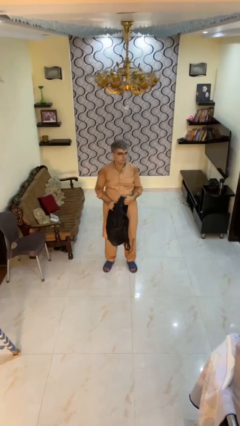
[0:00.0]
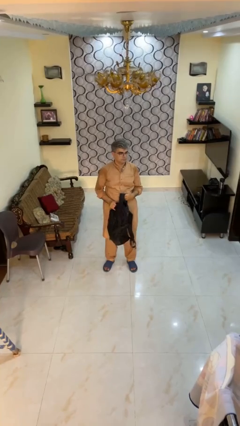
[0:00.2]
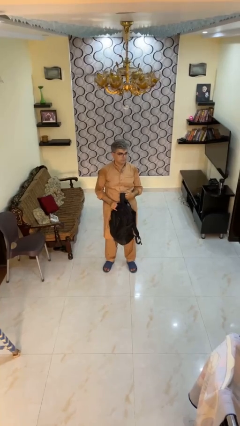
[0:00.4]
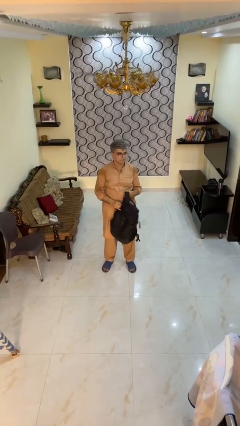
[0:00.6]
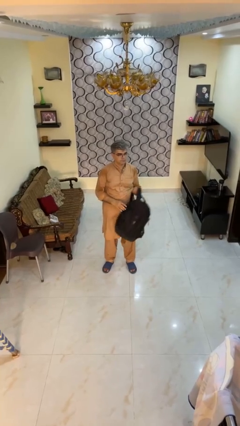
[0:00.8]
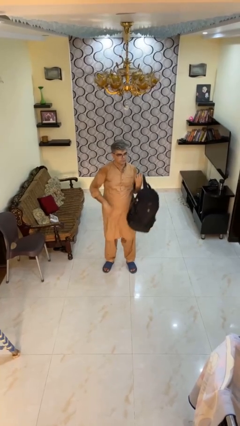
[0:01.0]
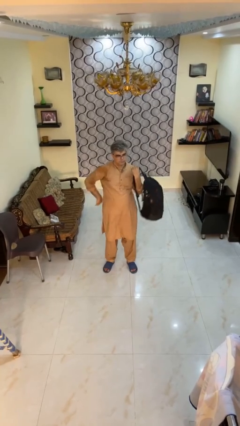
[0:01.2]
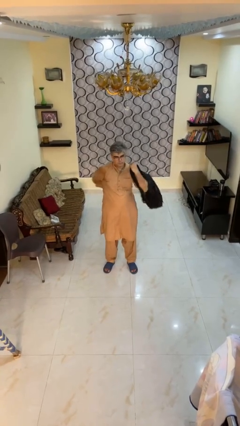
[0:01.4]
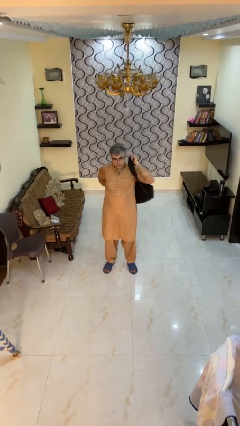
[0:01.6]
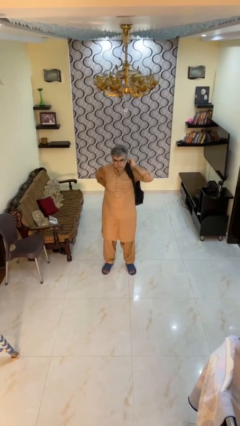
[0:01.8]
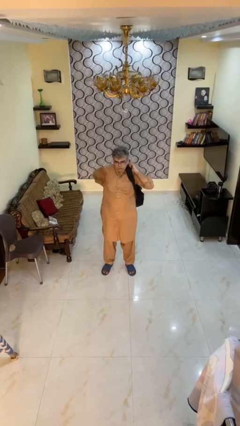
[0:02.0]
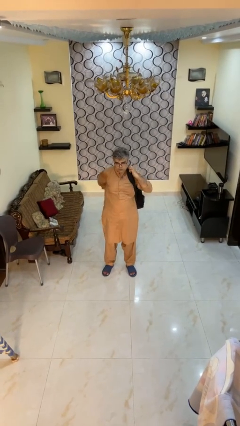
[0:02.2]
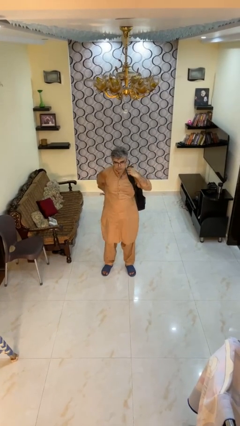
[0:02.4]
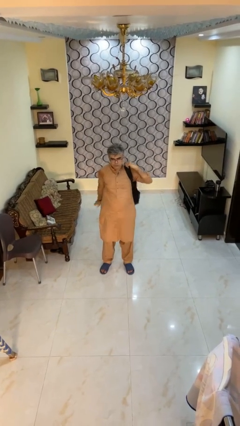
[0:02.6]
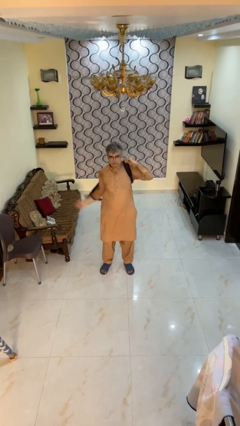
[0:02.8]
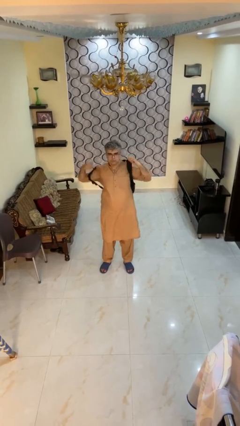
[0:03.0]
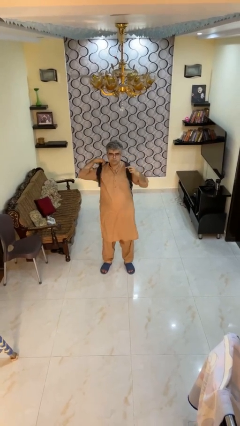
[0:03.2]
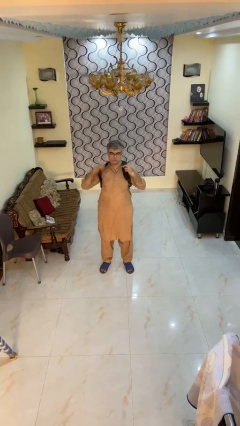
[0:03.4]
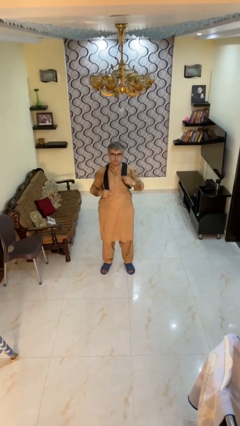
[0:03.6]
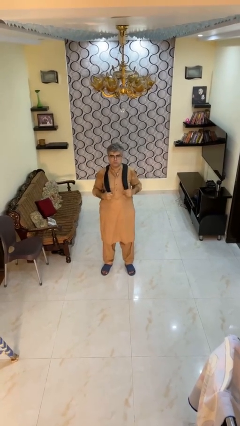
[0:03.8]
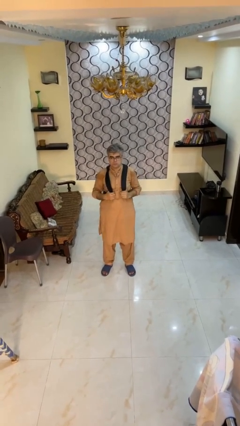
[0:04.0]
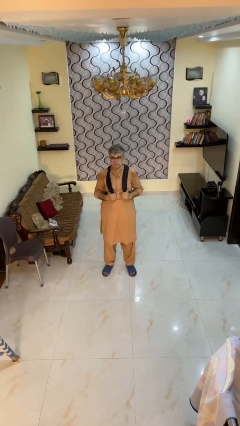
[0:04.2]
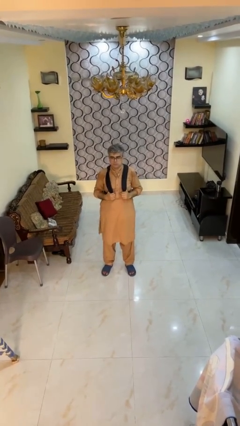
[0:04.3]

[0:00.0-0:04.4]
person puts on backpack

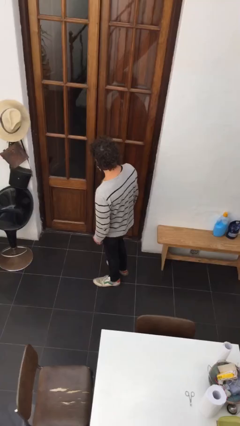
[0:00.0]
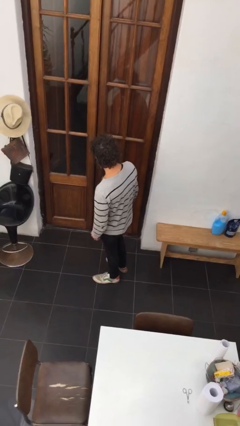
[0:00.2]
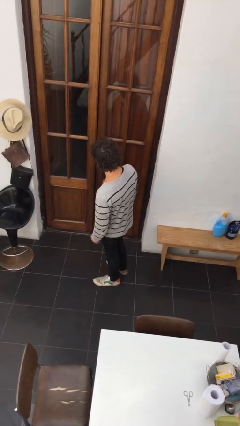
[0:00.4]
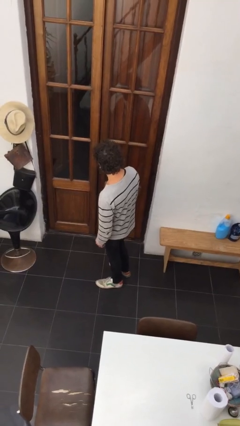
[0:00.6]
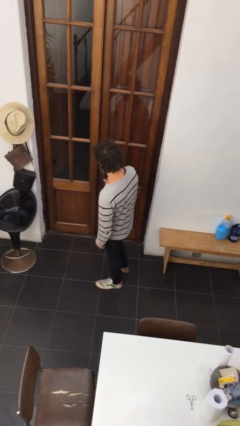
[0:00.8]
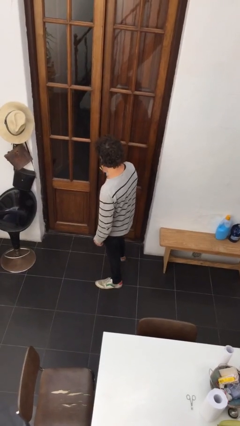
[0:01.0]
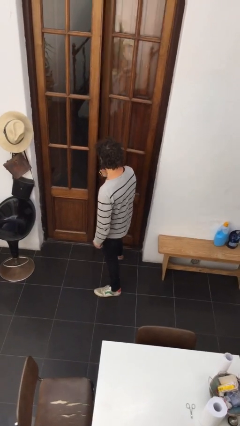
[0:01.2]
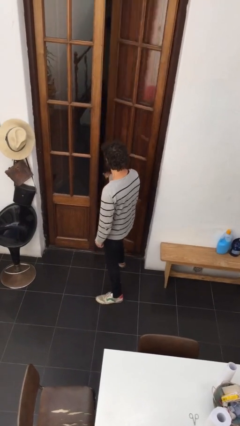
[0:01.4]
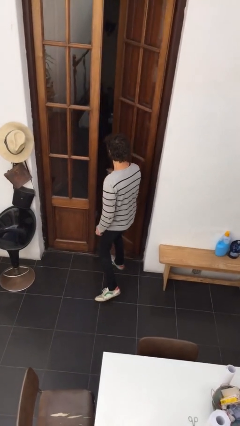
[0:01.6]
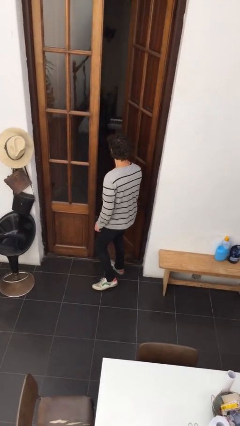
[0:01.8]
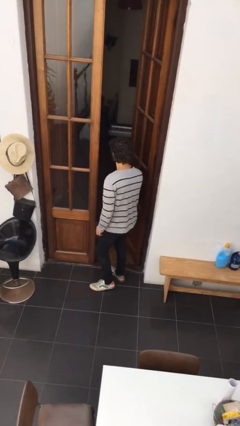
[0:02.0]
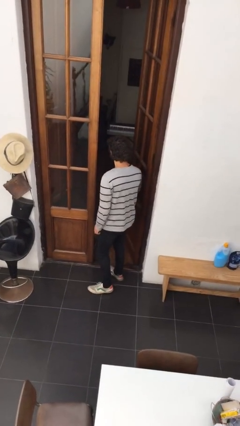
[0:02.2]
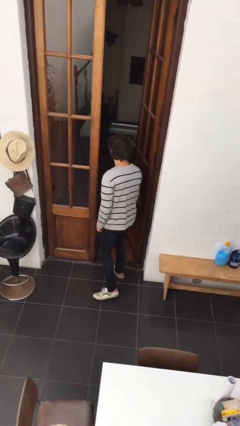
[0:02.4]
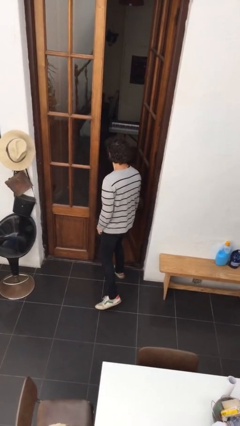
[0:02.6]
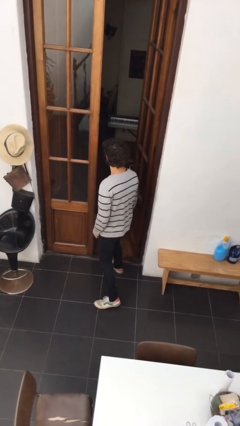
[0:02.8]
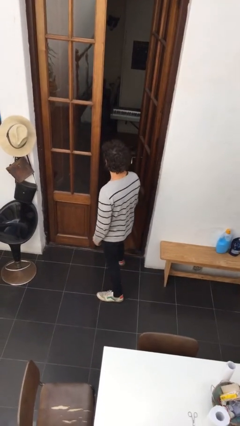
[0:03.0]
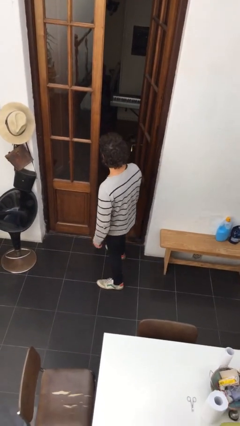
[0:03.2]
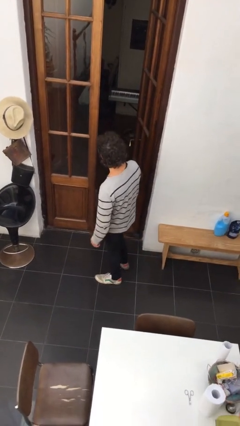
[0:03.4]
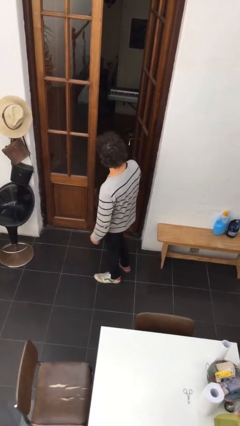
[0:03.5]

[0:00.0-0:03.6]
person opens facility door

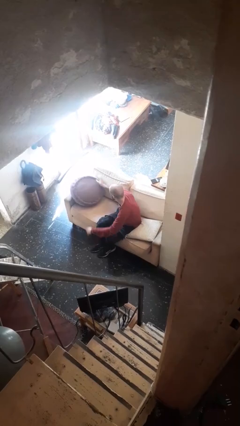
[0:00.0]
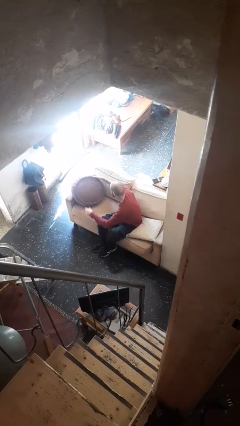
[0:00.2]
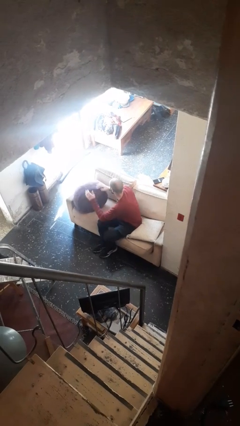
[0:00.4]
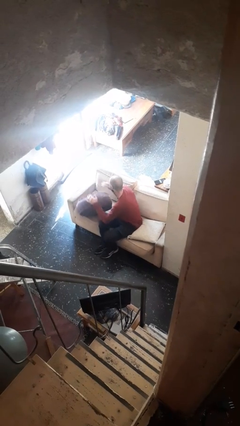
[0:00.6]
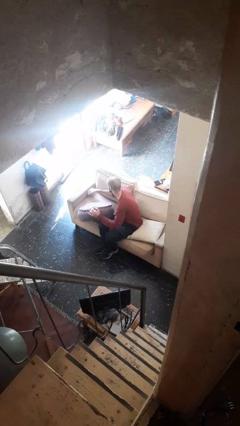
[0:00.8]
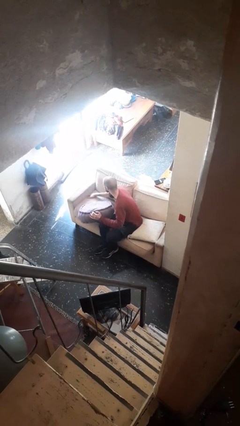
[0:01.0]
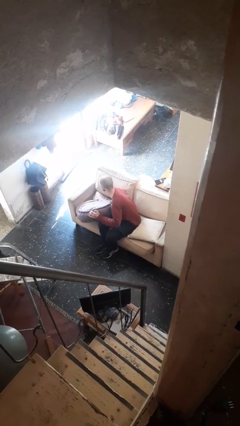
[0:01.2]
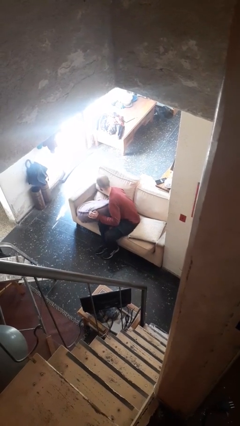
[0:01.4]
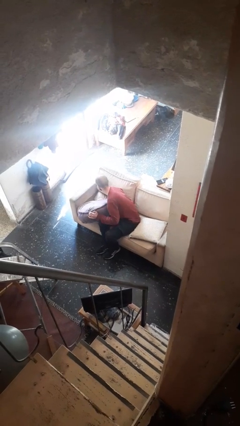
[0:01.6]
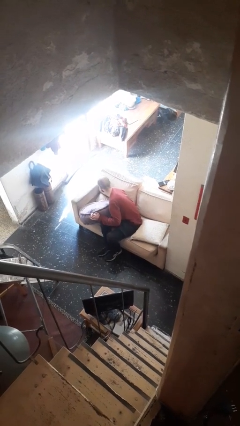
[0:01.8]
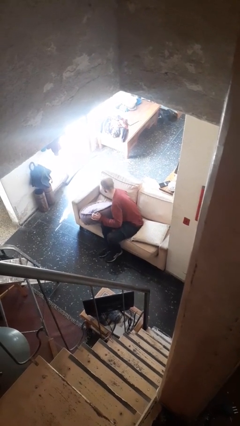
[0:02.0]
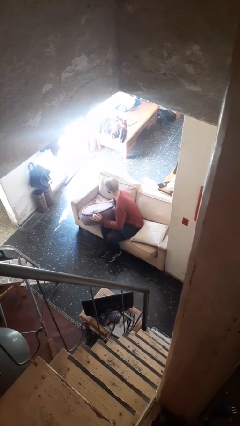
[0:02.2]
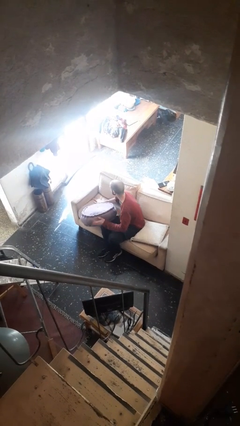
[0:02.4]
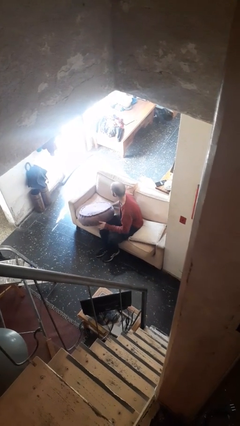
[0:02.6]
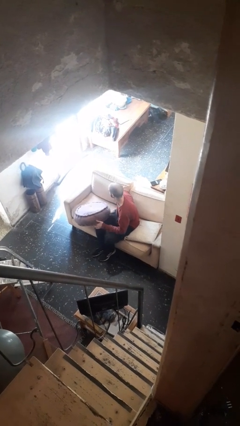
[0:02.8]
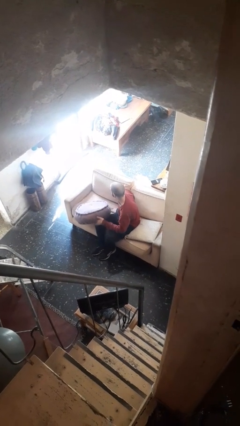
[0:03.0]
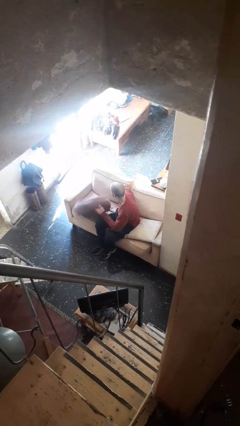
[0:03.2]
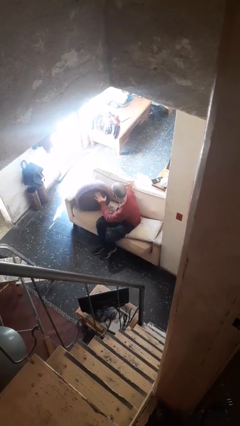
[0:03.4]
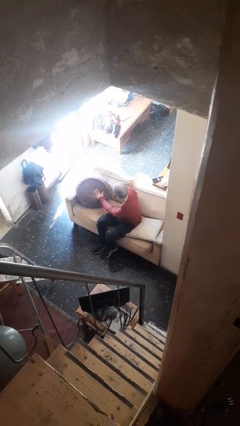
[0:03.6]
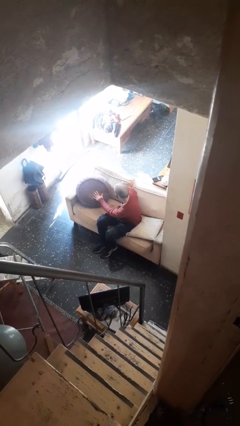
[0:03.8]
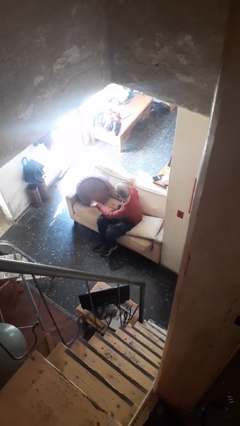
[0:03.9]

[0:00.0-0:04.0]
person searches in couch

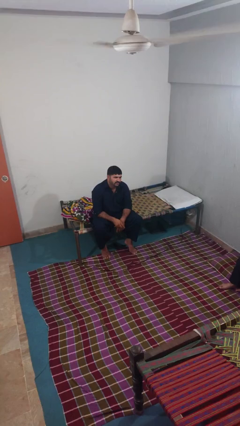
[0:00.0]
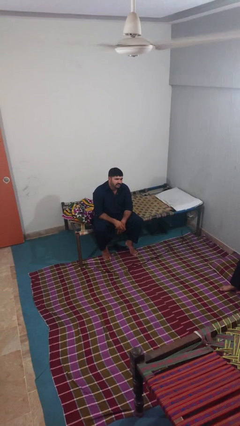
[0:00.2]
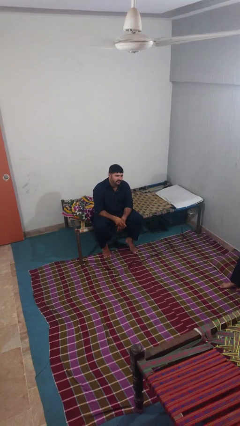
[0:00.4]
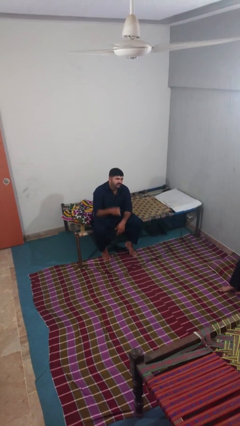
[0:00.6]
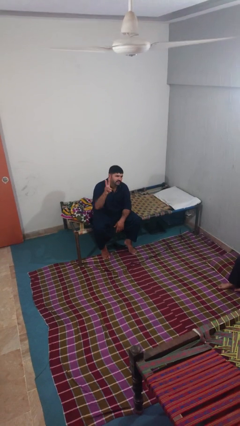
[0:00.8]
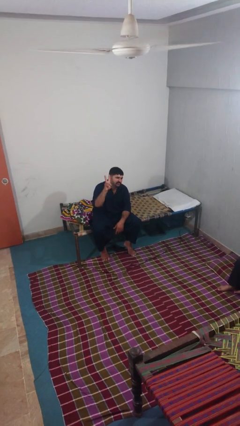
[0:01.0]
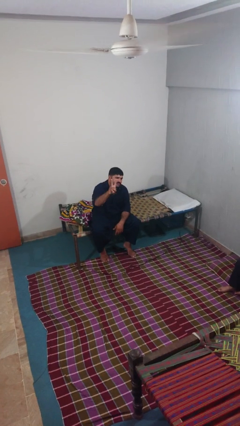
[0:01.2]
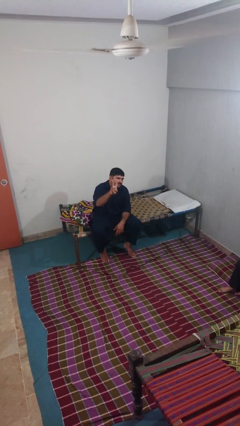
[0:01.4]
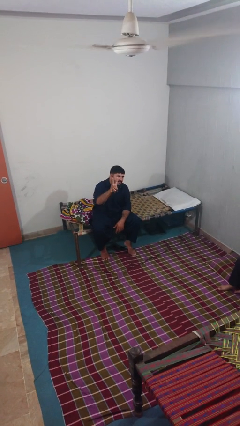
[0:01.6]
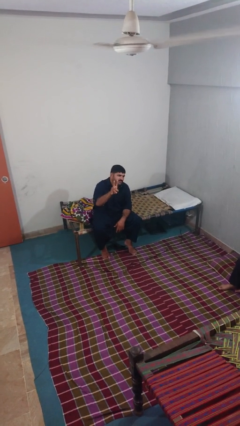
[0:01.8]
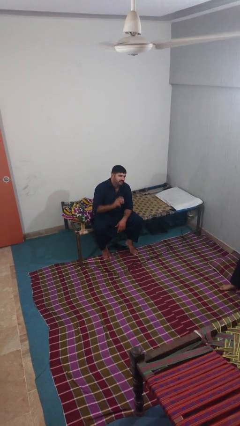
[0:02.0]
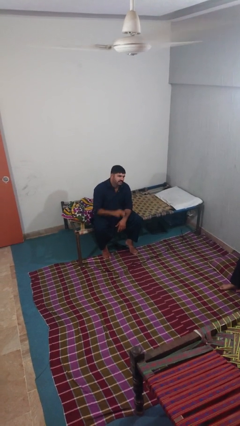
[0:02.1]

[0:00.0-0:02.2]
person gestures peace

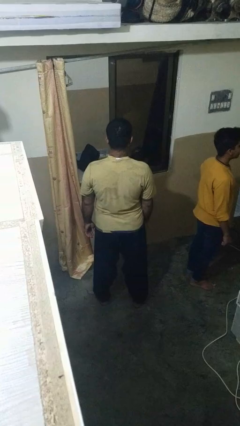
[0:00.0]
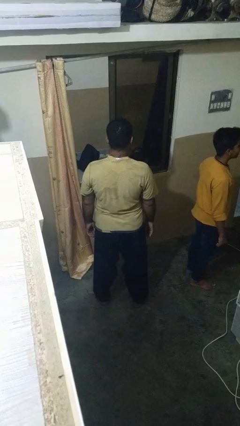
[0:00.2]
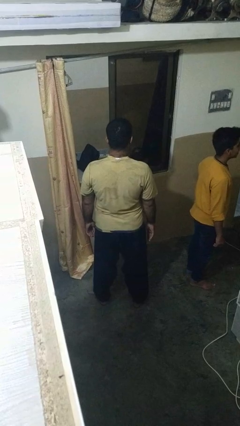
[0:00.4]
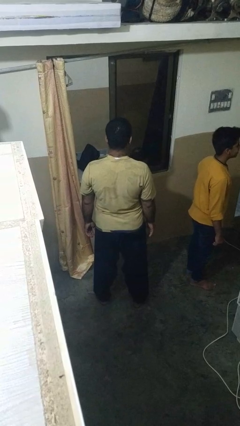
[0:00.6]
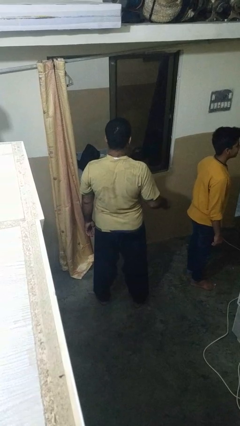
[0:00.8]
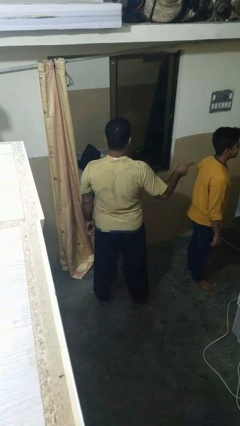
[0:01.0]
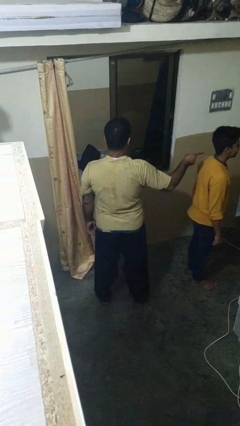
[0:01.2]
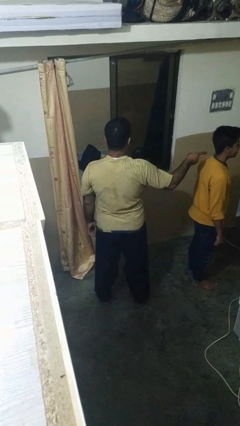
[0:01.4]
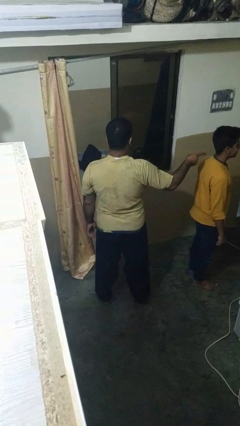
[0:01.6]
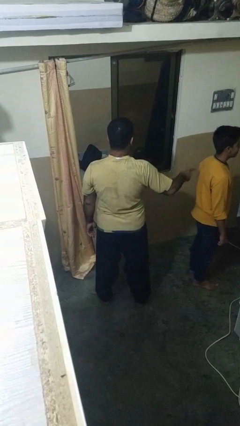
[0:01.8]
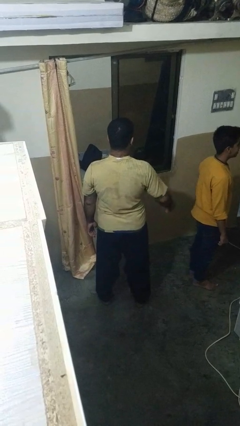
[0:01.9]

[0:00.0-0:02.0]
person points at person

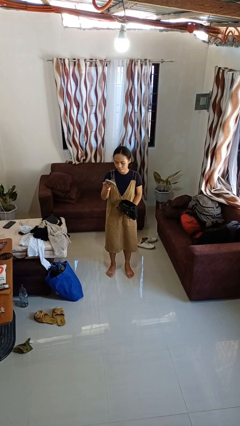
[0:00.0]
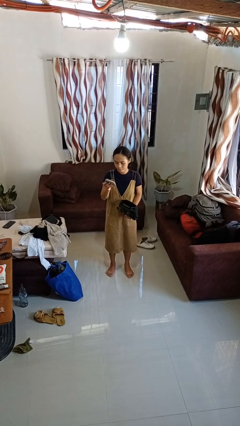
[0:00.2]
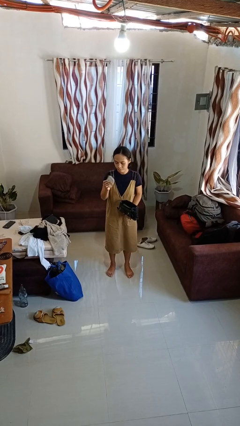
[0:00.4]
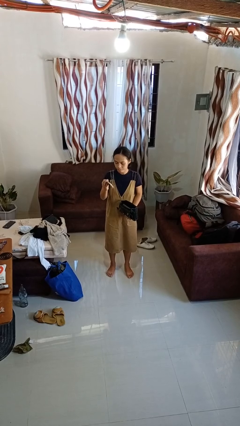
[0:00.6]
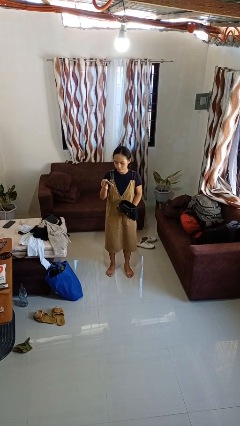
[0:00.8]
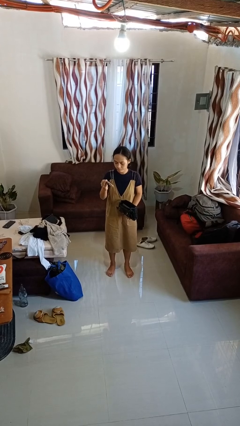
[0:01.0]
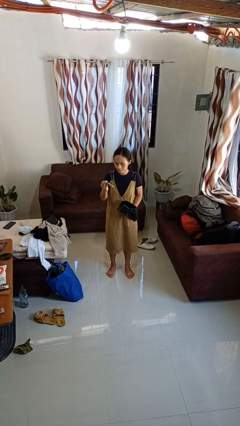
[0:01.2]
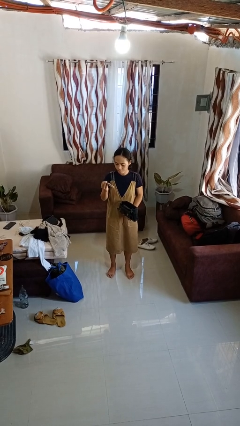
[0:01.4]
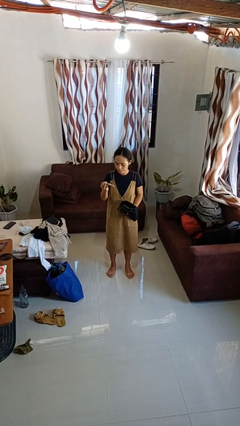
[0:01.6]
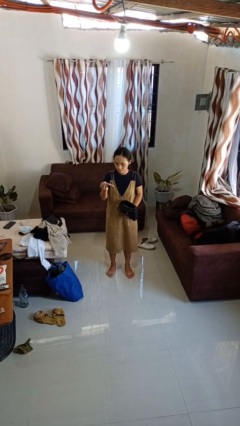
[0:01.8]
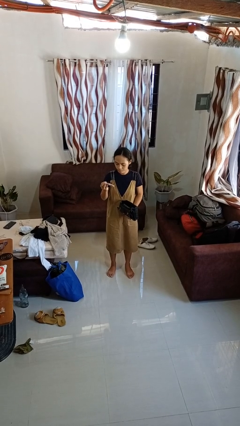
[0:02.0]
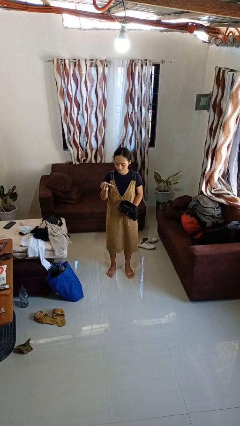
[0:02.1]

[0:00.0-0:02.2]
person takes object from purse
